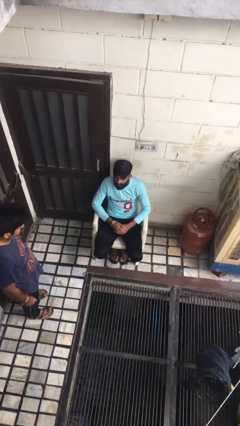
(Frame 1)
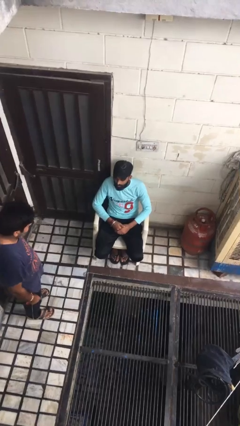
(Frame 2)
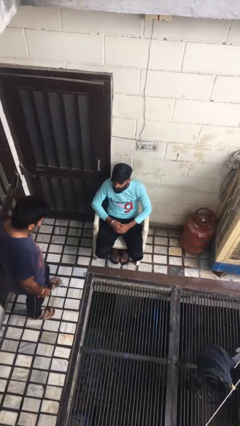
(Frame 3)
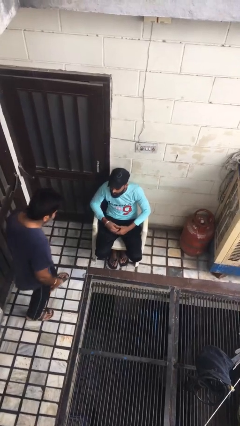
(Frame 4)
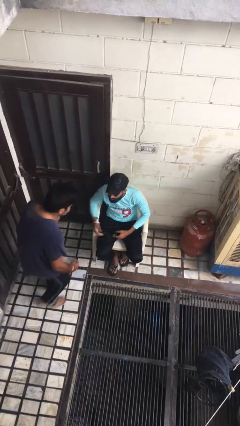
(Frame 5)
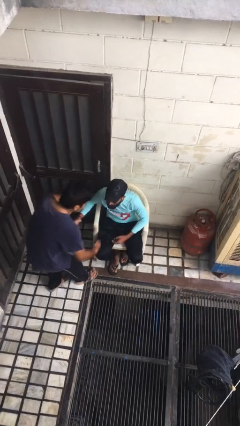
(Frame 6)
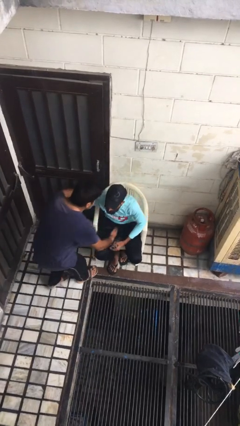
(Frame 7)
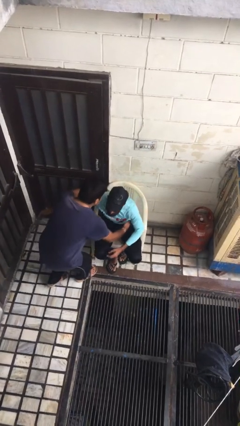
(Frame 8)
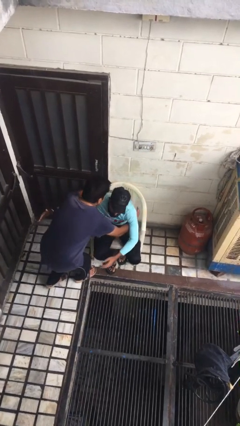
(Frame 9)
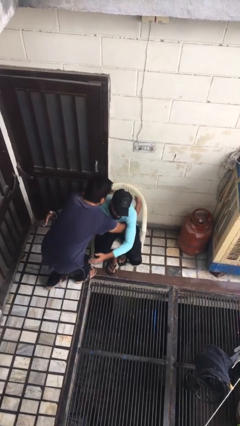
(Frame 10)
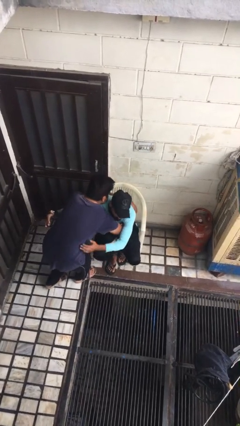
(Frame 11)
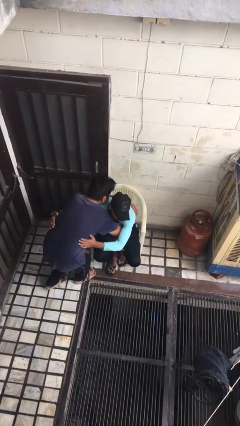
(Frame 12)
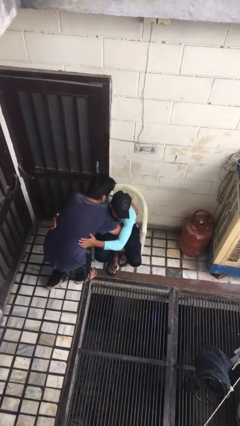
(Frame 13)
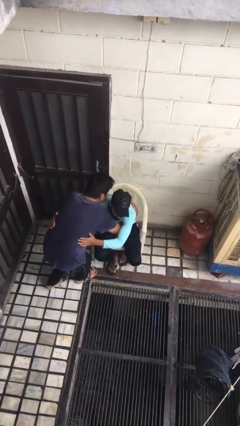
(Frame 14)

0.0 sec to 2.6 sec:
person embraces person

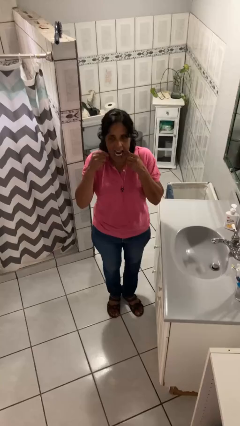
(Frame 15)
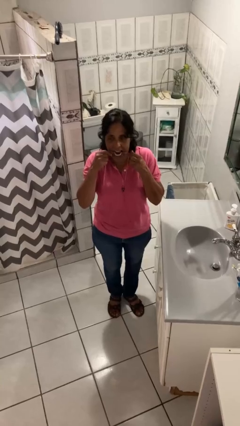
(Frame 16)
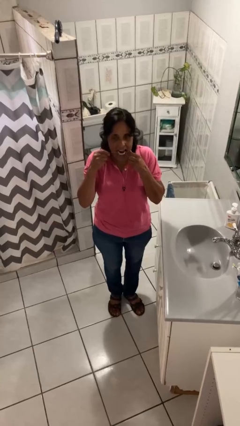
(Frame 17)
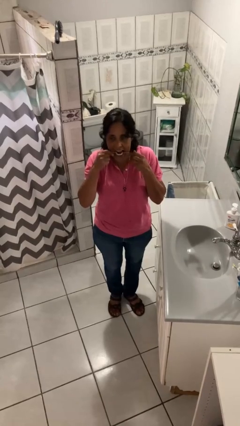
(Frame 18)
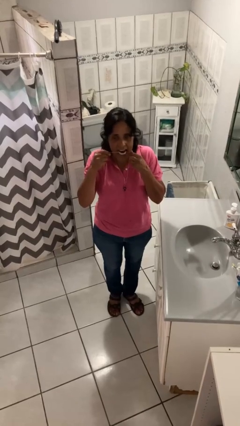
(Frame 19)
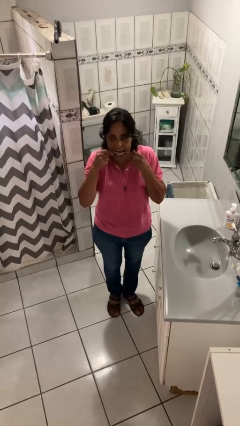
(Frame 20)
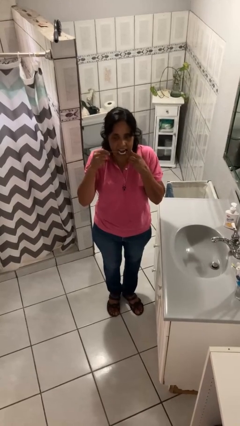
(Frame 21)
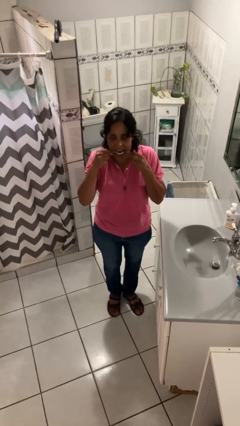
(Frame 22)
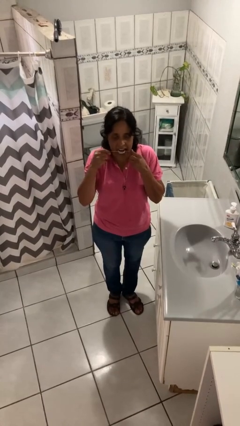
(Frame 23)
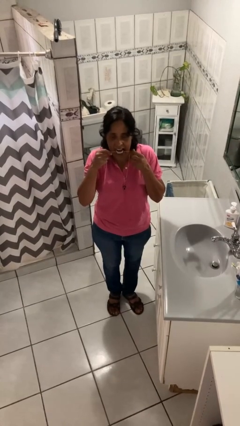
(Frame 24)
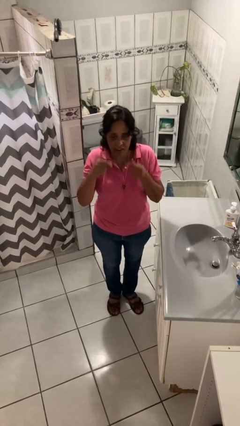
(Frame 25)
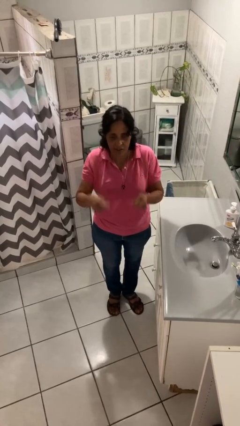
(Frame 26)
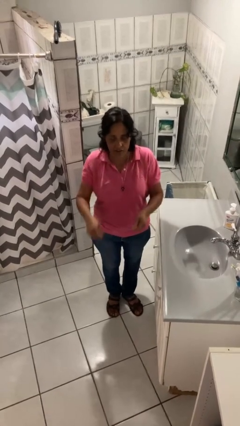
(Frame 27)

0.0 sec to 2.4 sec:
person flosses

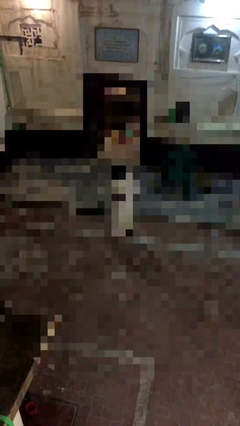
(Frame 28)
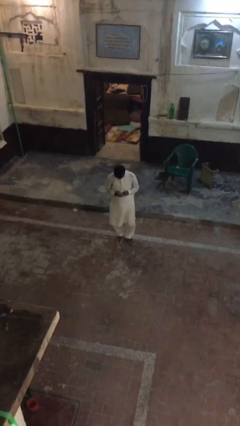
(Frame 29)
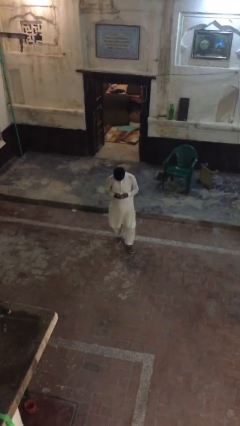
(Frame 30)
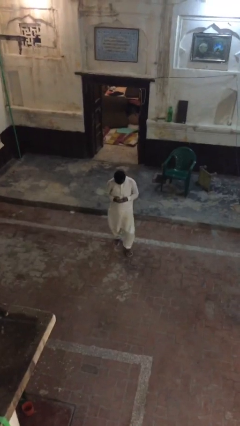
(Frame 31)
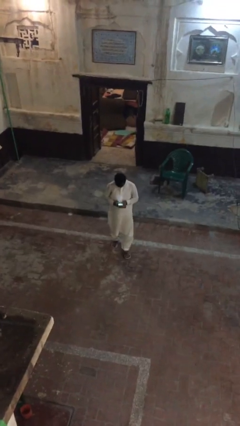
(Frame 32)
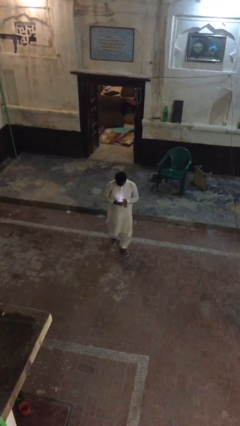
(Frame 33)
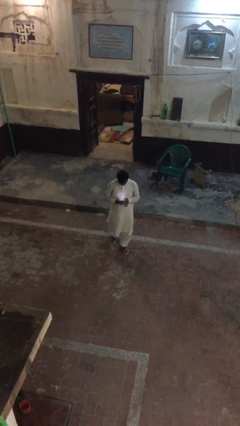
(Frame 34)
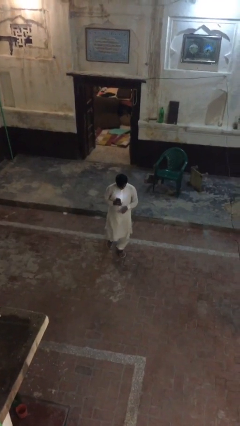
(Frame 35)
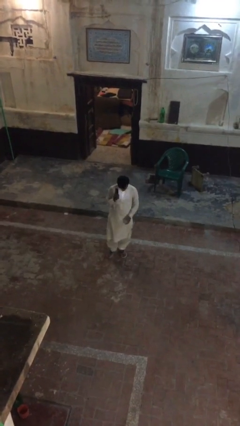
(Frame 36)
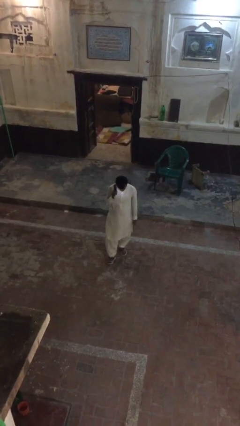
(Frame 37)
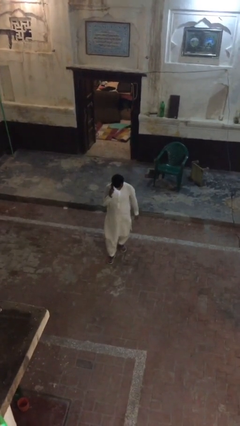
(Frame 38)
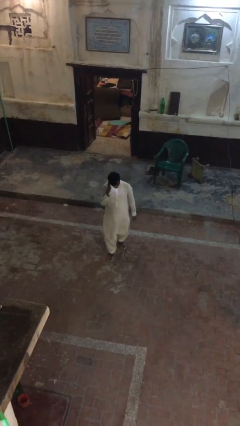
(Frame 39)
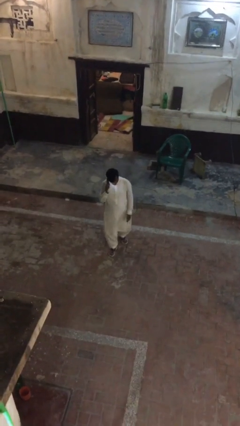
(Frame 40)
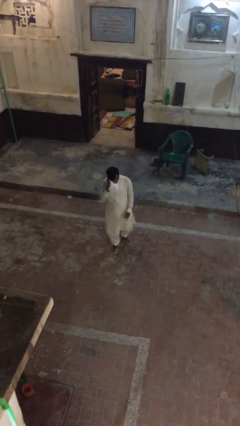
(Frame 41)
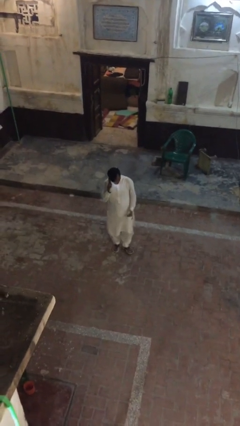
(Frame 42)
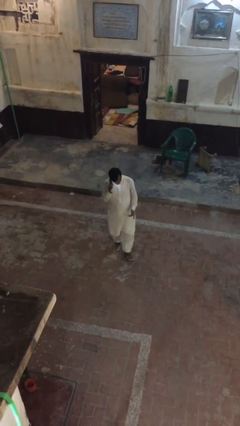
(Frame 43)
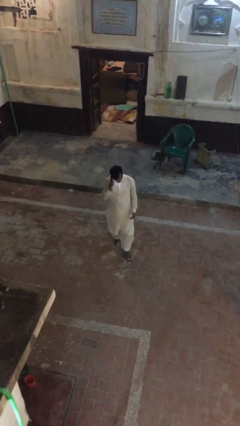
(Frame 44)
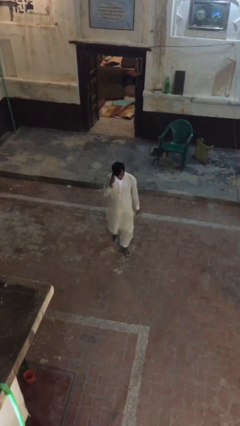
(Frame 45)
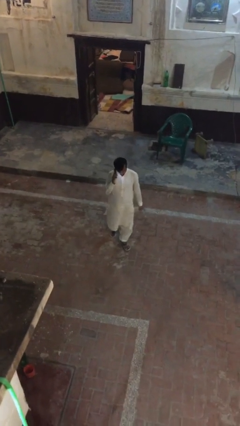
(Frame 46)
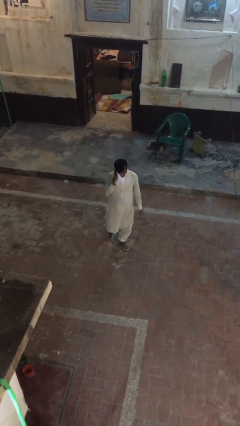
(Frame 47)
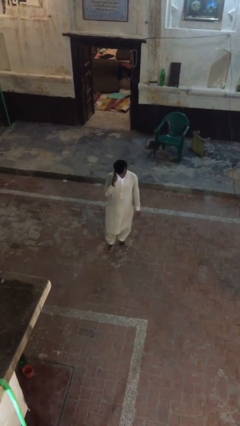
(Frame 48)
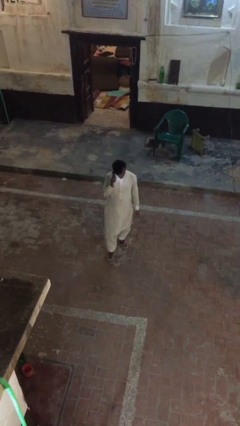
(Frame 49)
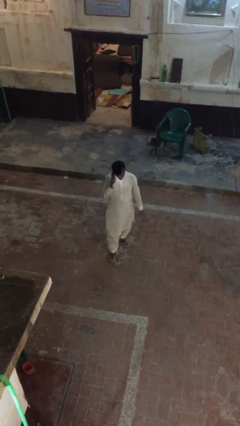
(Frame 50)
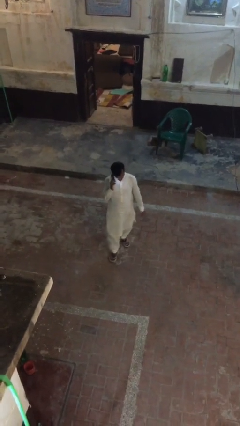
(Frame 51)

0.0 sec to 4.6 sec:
person talks on phone

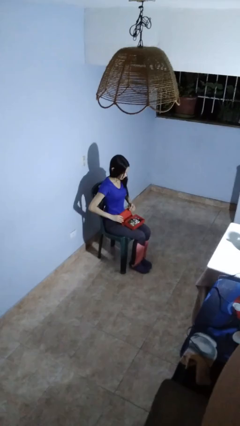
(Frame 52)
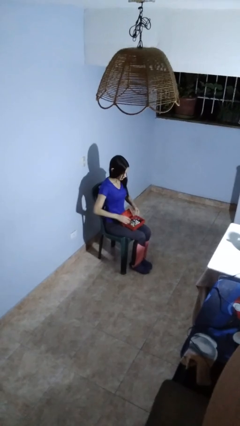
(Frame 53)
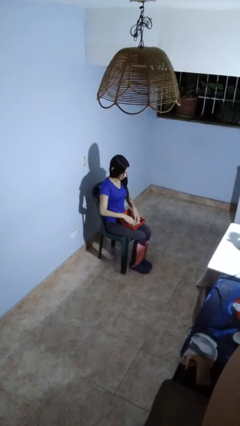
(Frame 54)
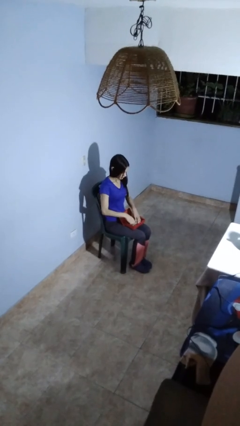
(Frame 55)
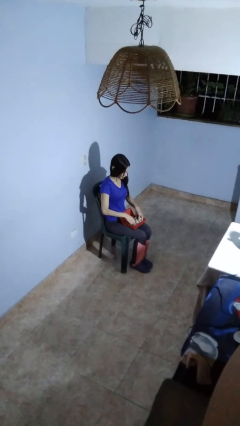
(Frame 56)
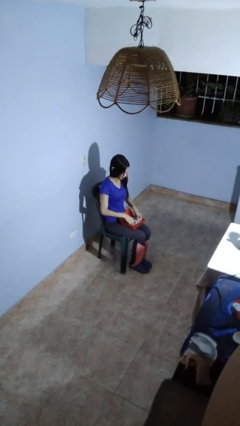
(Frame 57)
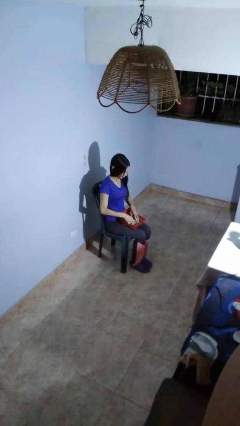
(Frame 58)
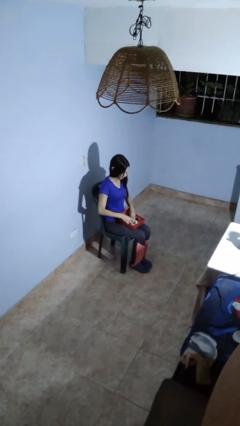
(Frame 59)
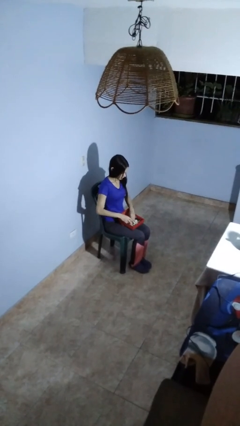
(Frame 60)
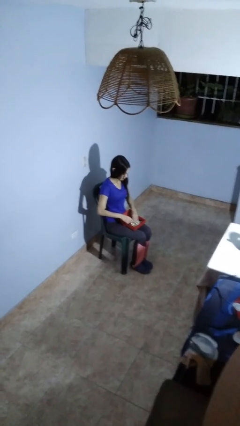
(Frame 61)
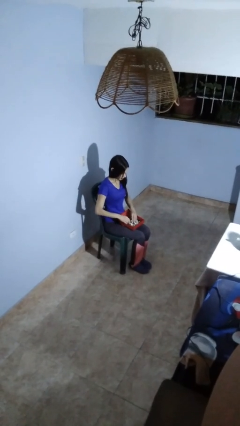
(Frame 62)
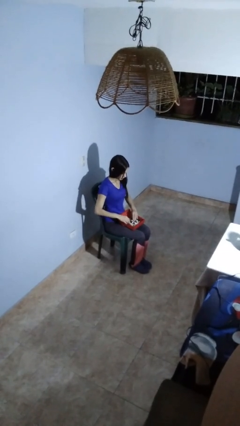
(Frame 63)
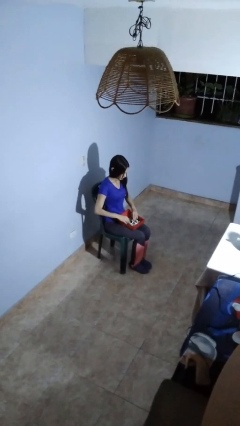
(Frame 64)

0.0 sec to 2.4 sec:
person searches jewelry box

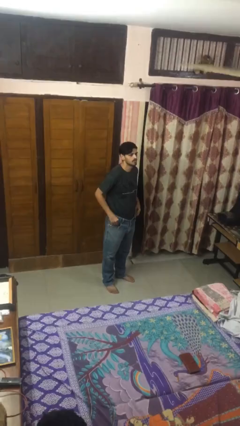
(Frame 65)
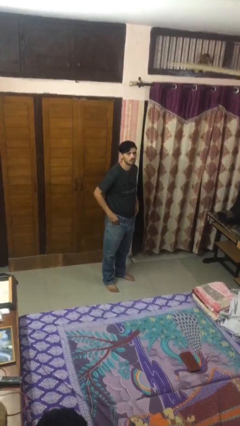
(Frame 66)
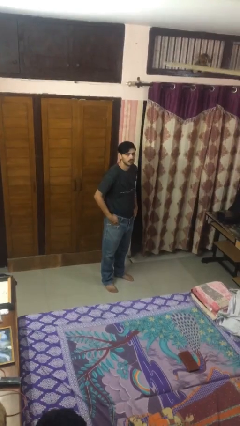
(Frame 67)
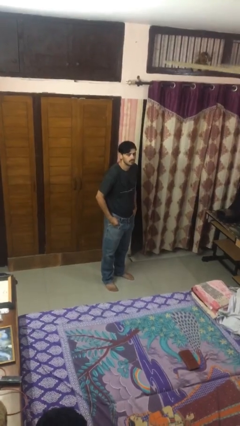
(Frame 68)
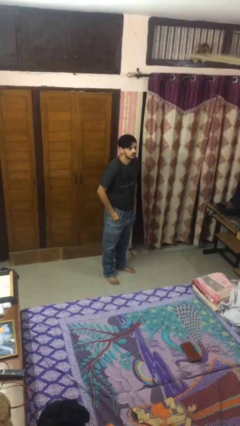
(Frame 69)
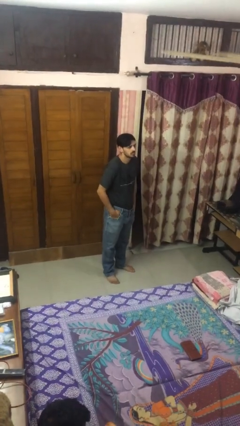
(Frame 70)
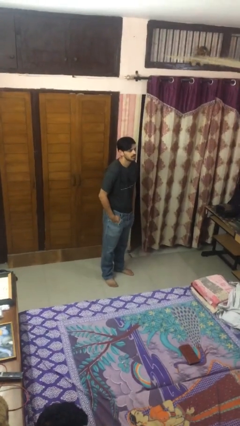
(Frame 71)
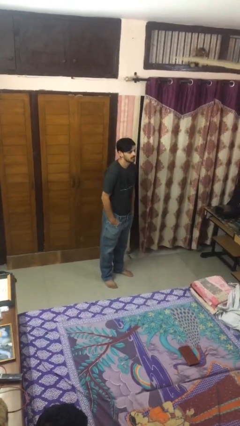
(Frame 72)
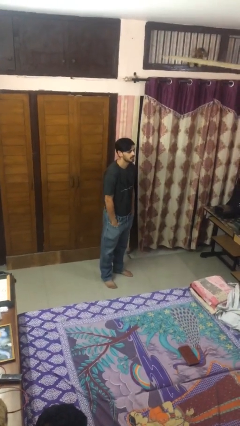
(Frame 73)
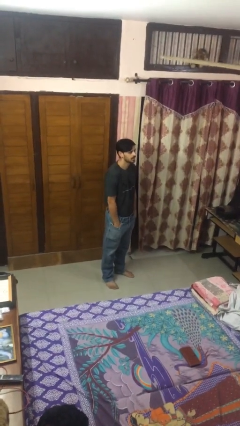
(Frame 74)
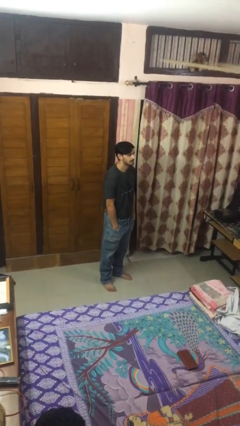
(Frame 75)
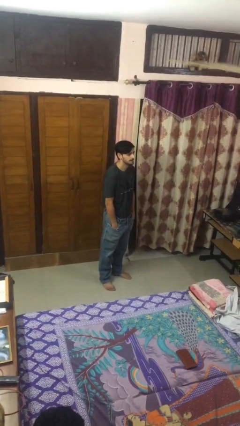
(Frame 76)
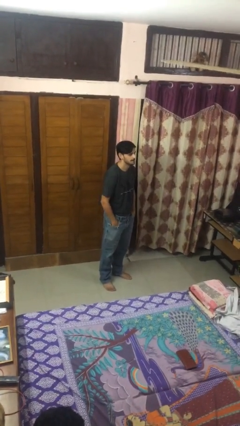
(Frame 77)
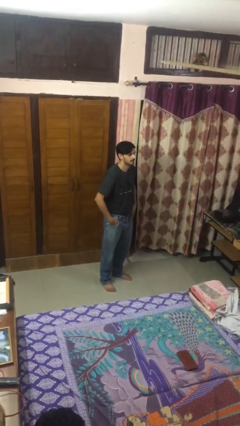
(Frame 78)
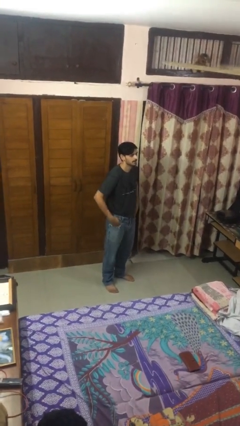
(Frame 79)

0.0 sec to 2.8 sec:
person puts hands in back pockets

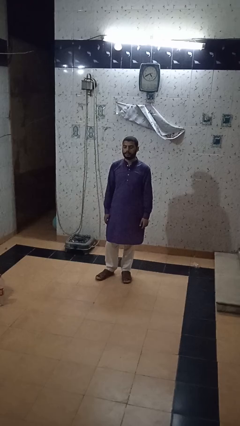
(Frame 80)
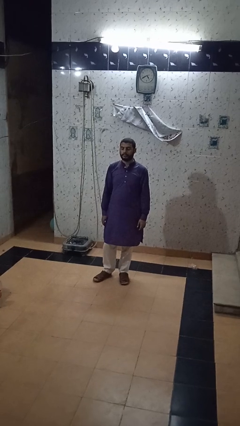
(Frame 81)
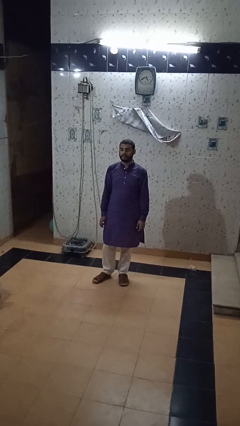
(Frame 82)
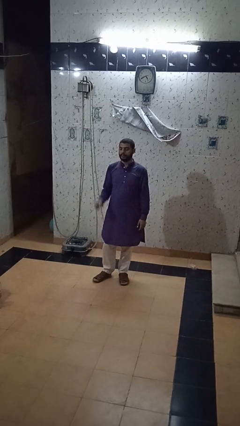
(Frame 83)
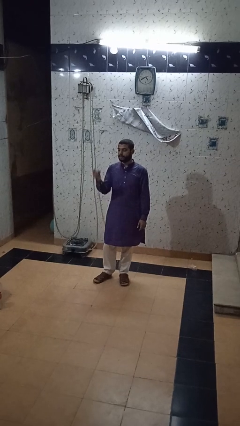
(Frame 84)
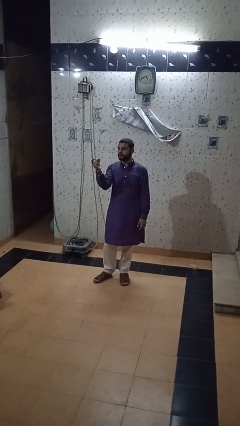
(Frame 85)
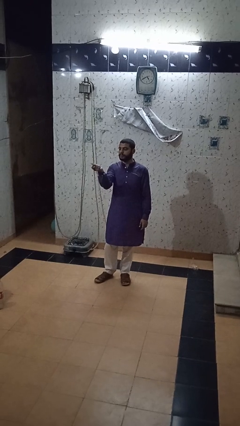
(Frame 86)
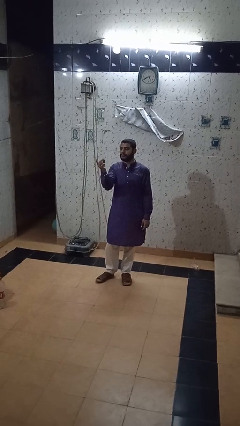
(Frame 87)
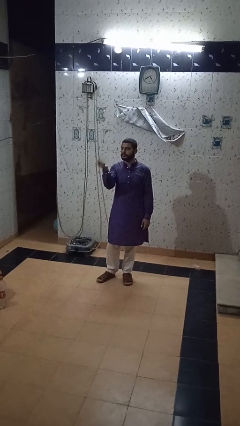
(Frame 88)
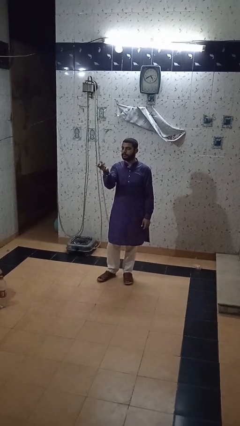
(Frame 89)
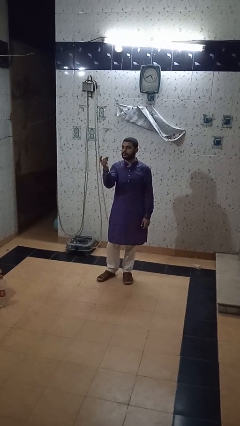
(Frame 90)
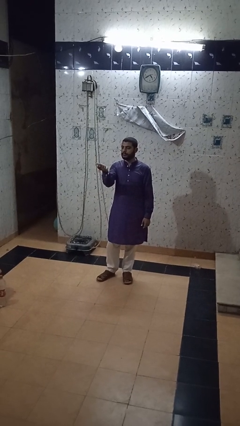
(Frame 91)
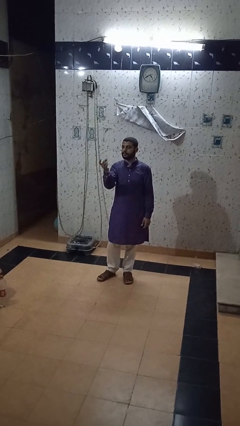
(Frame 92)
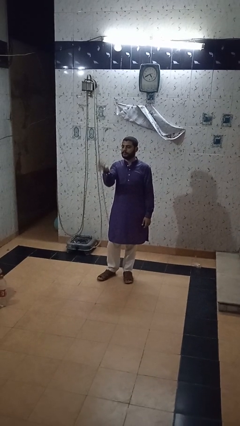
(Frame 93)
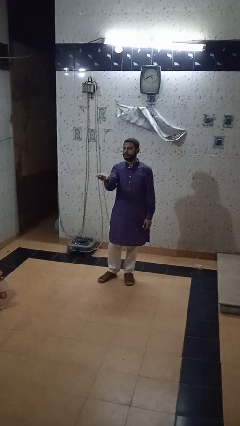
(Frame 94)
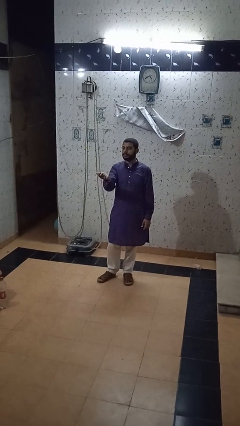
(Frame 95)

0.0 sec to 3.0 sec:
person snaps fingers
